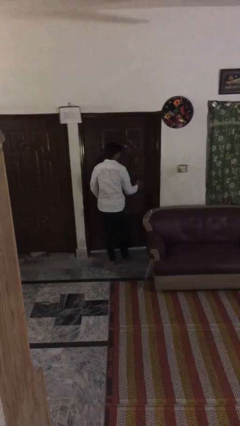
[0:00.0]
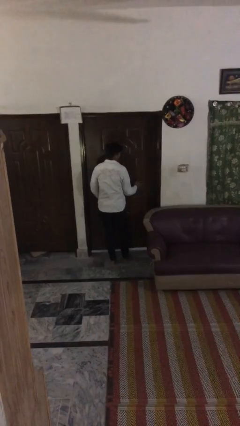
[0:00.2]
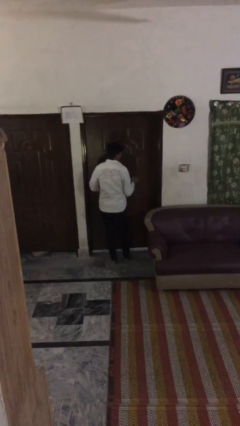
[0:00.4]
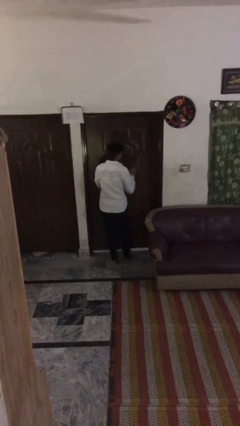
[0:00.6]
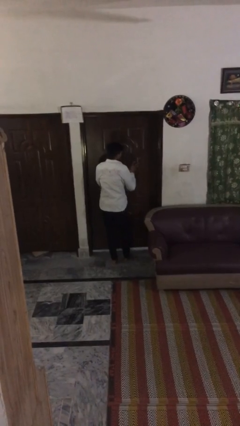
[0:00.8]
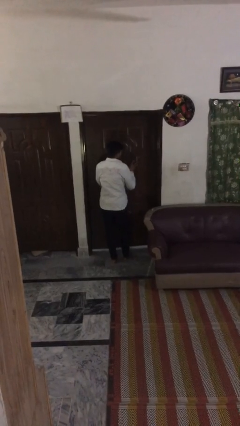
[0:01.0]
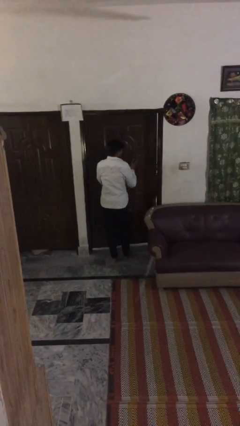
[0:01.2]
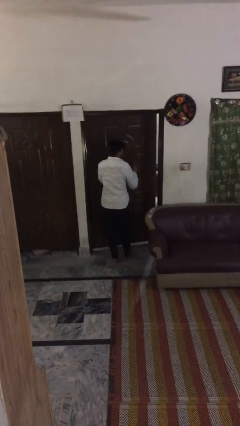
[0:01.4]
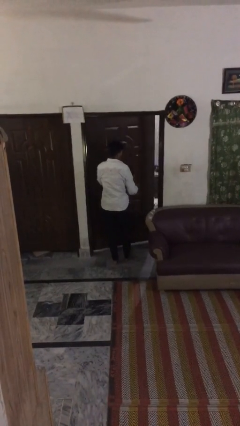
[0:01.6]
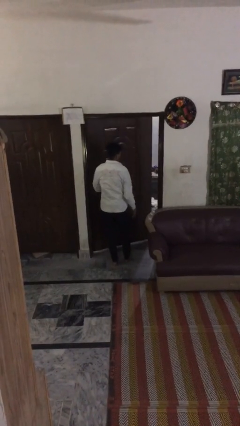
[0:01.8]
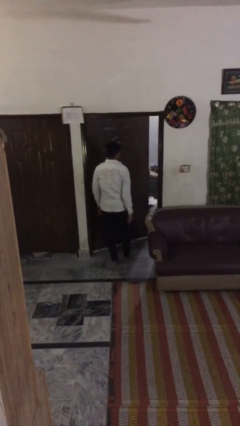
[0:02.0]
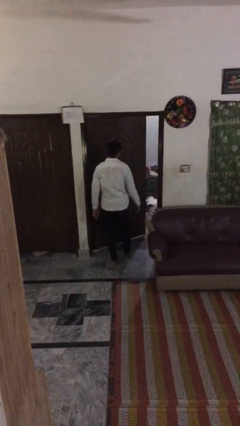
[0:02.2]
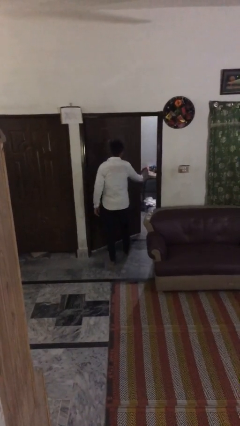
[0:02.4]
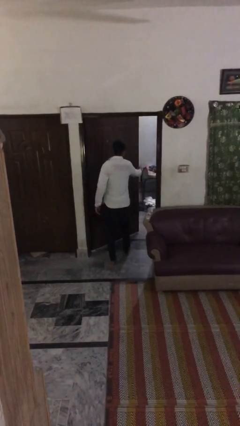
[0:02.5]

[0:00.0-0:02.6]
person opens facility door

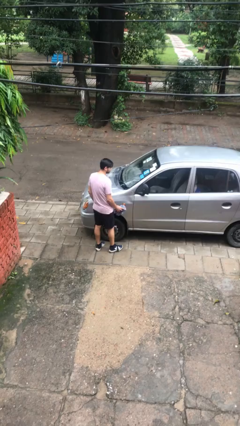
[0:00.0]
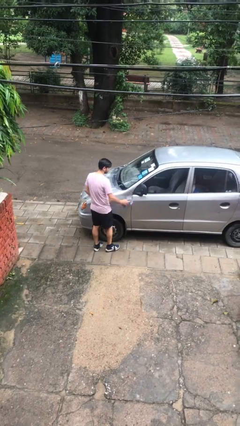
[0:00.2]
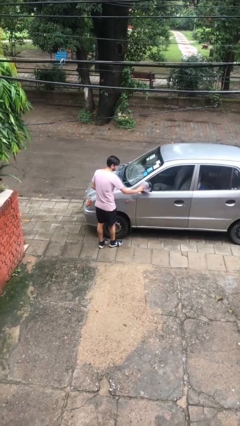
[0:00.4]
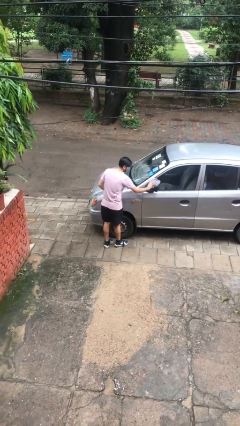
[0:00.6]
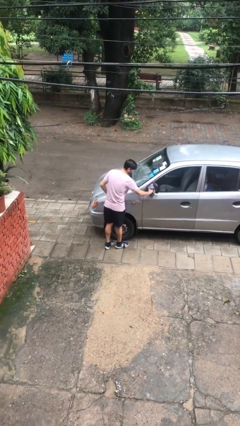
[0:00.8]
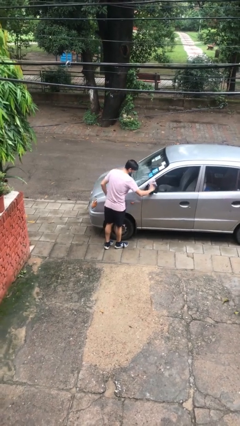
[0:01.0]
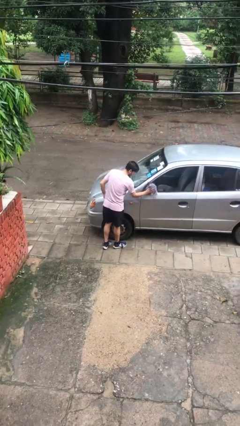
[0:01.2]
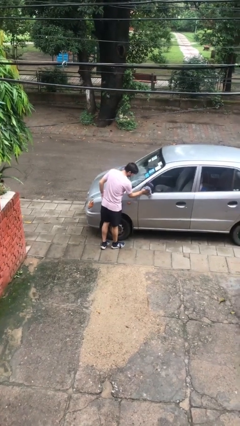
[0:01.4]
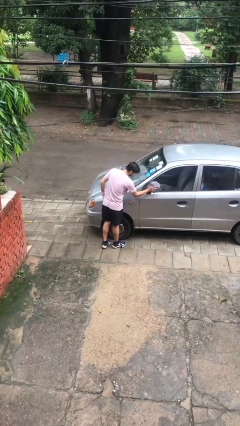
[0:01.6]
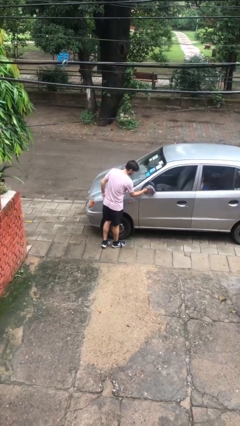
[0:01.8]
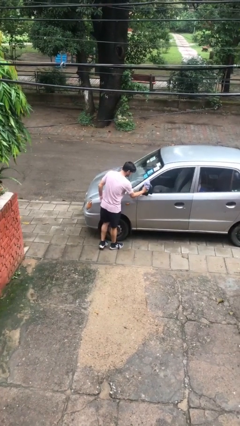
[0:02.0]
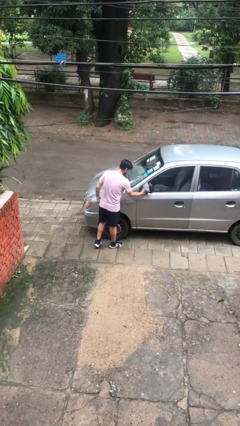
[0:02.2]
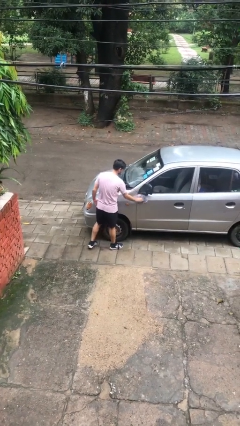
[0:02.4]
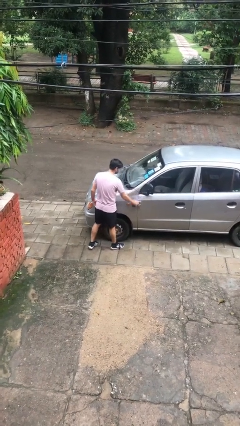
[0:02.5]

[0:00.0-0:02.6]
person polishes car with rag

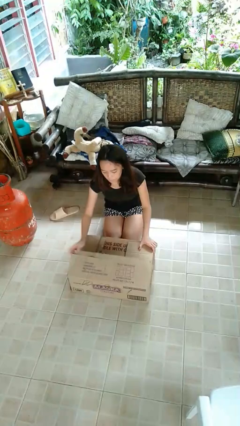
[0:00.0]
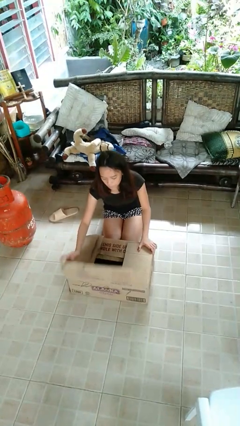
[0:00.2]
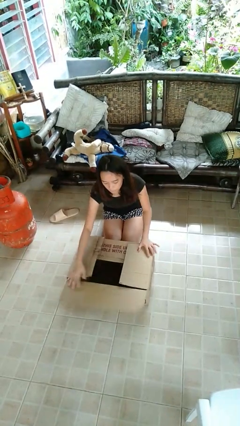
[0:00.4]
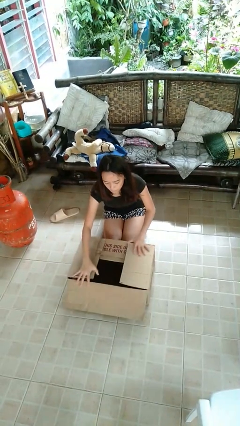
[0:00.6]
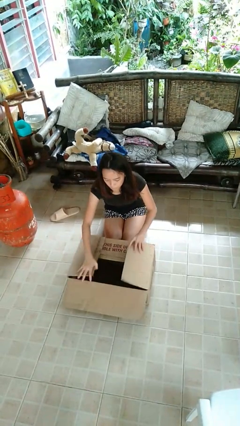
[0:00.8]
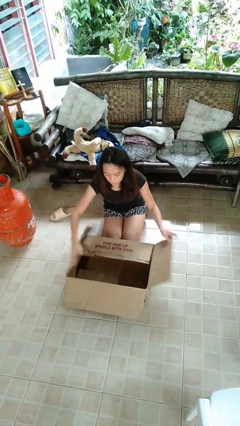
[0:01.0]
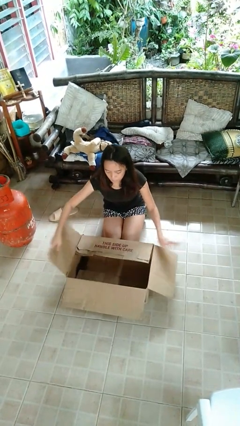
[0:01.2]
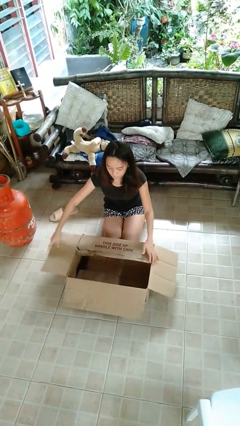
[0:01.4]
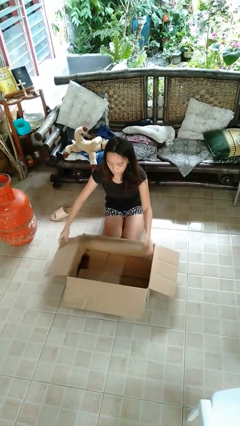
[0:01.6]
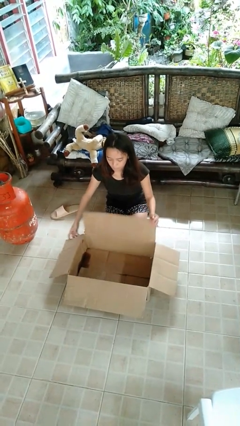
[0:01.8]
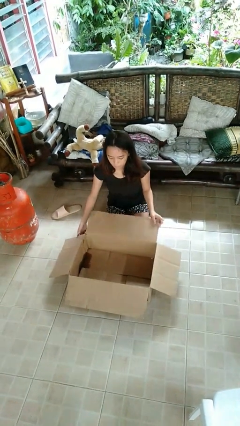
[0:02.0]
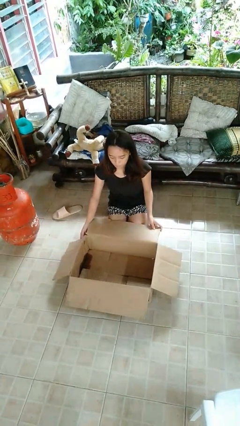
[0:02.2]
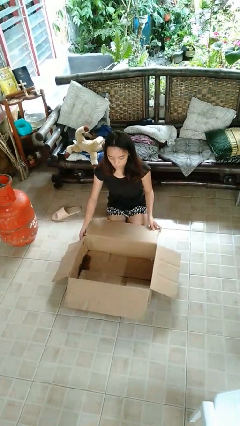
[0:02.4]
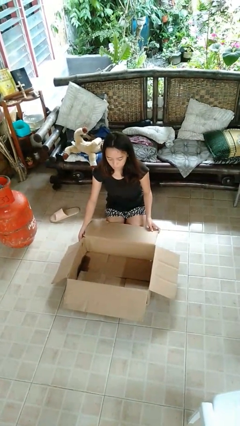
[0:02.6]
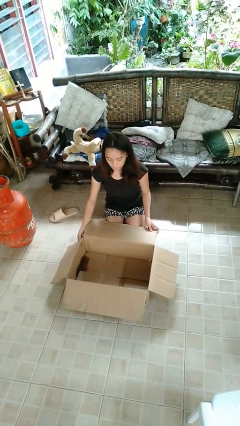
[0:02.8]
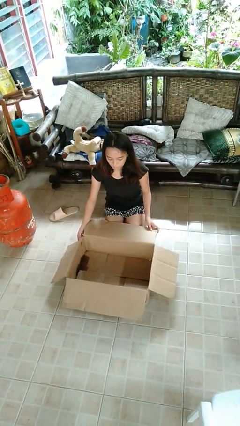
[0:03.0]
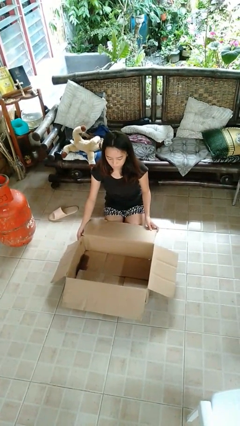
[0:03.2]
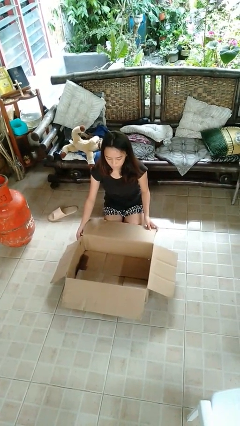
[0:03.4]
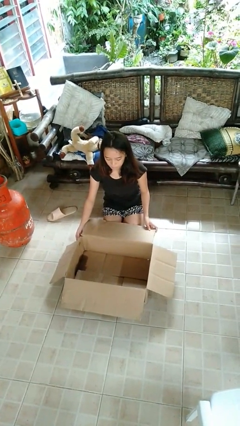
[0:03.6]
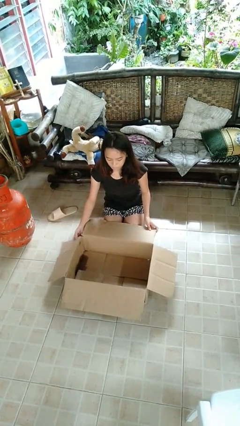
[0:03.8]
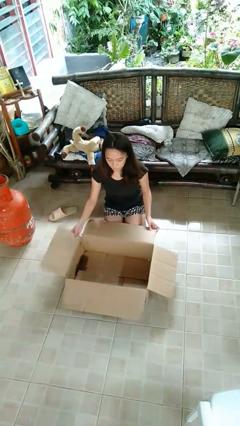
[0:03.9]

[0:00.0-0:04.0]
person opens box

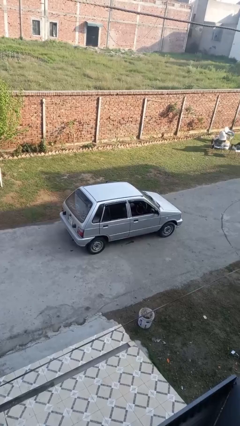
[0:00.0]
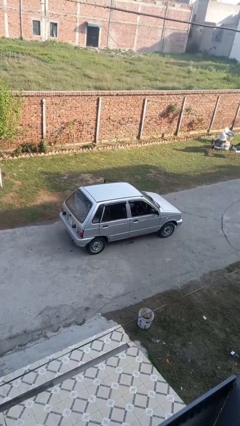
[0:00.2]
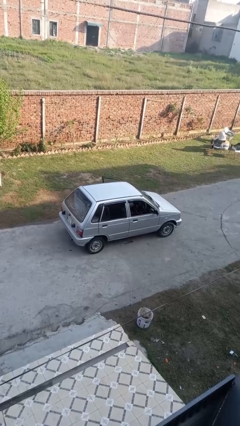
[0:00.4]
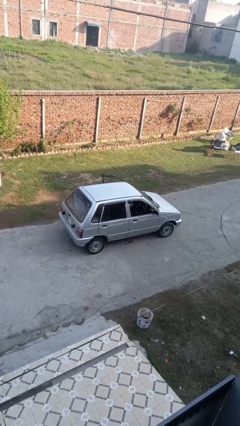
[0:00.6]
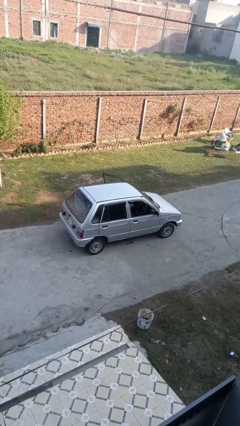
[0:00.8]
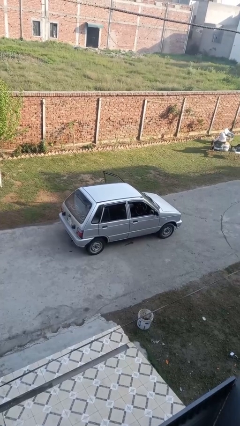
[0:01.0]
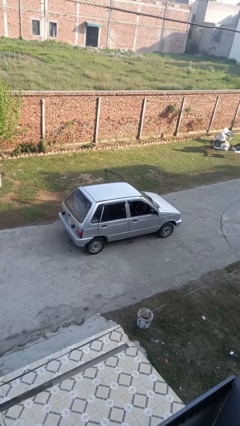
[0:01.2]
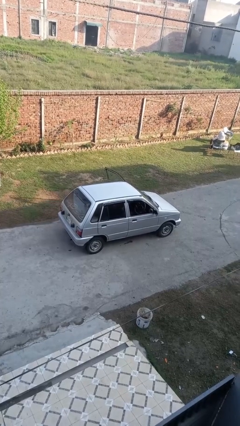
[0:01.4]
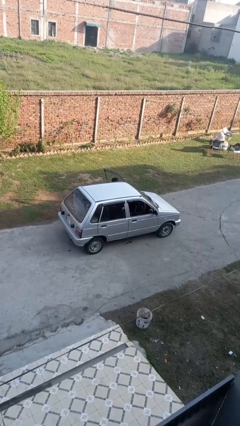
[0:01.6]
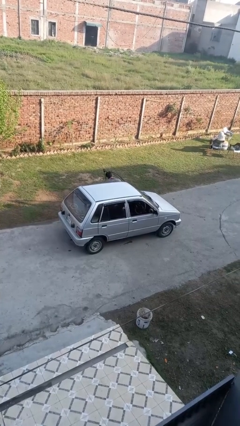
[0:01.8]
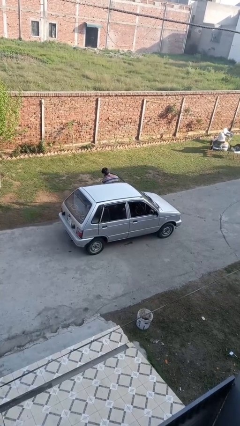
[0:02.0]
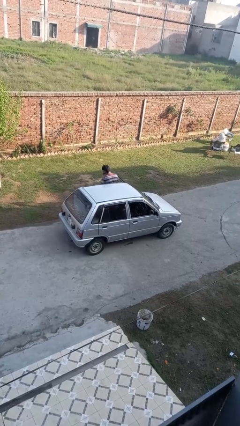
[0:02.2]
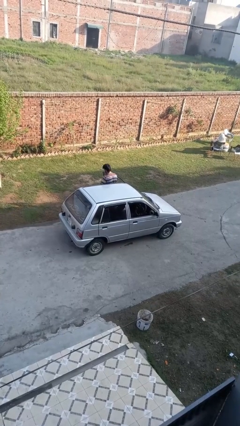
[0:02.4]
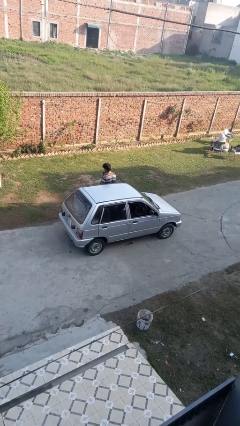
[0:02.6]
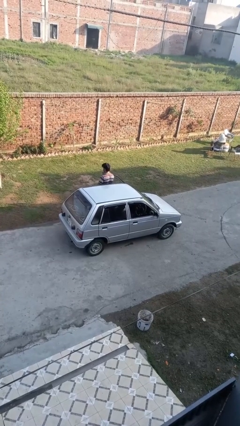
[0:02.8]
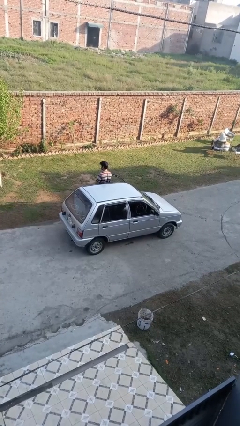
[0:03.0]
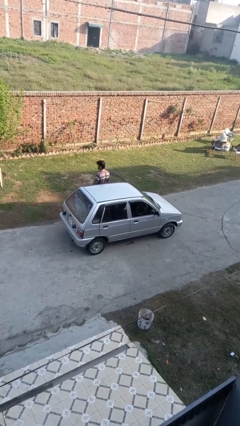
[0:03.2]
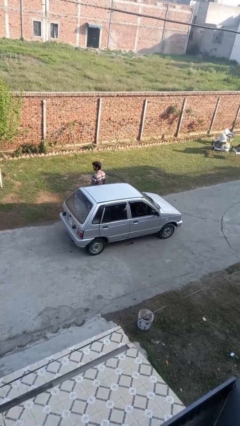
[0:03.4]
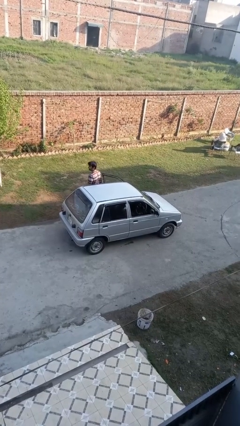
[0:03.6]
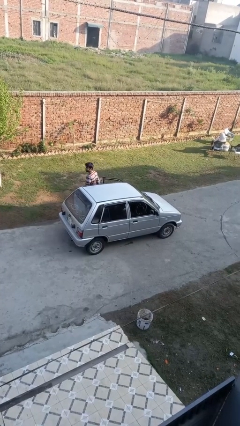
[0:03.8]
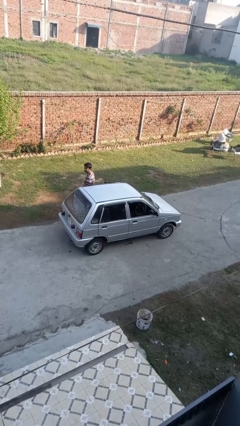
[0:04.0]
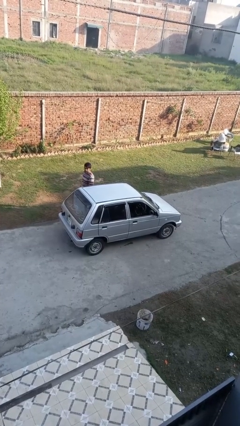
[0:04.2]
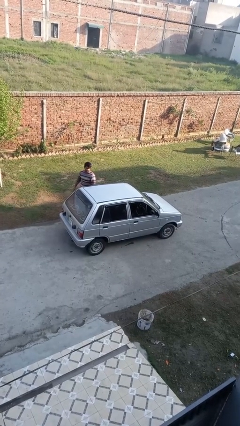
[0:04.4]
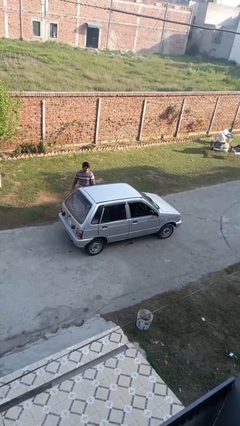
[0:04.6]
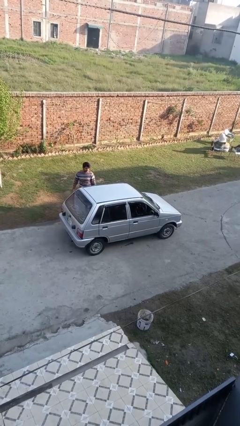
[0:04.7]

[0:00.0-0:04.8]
car drops off person

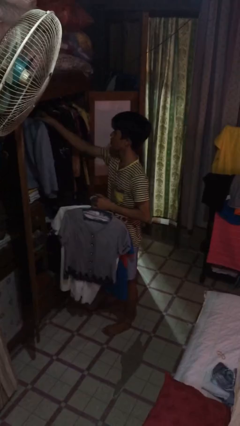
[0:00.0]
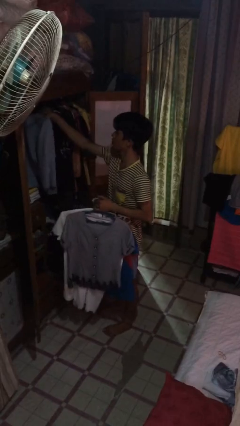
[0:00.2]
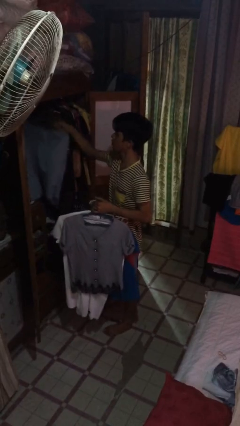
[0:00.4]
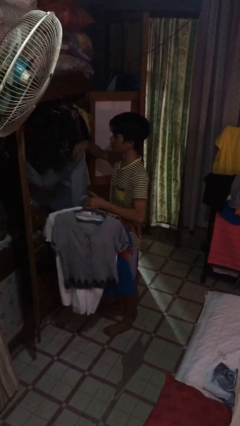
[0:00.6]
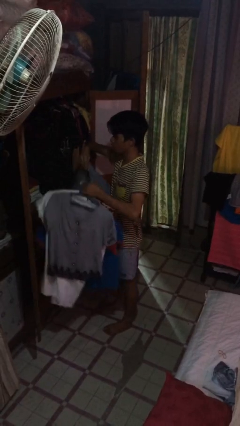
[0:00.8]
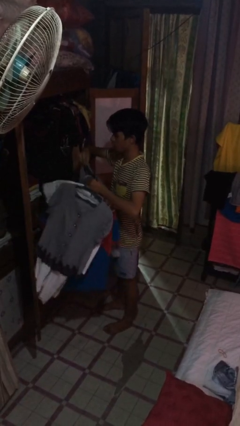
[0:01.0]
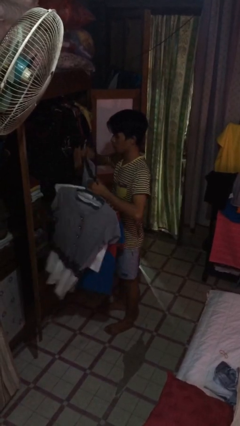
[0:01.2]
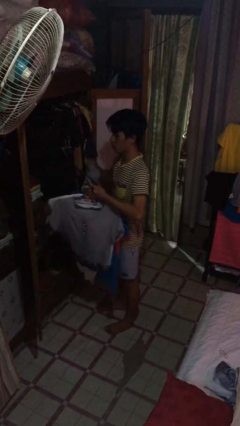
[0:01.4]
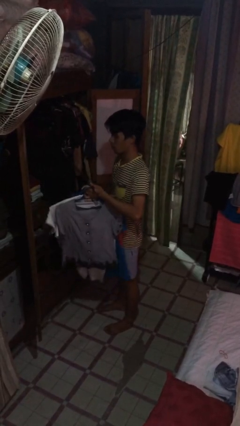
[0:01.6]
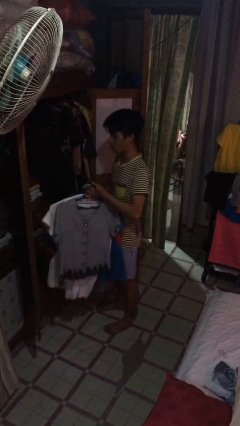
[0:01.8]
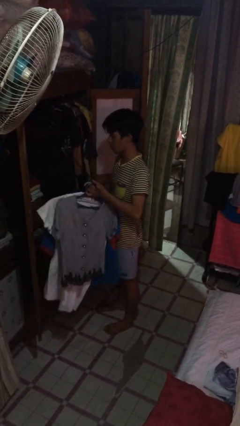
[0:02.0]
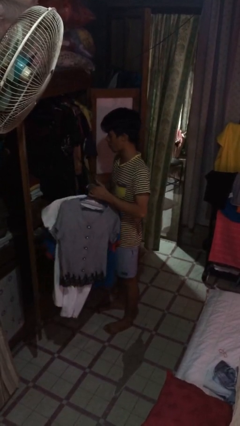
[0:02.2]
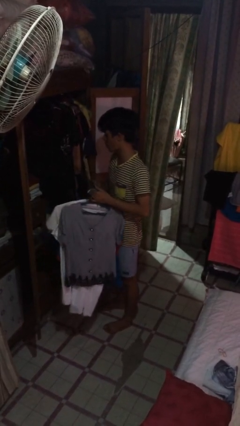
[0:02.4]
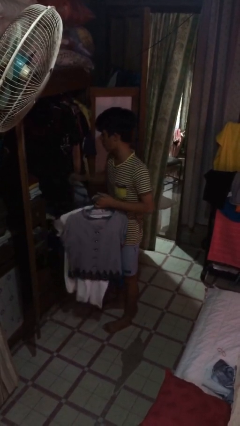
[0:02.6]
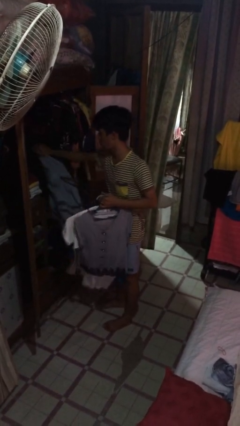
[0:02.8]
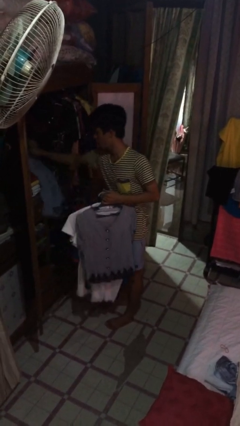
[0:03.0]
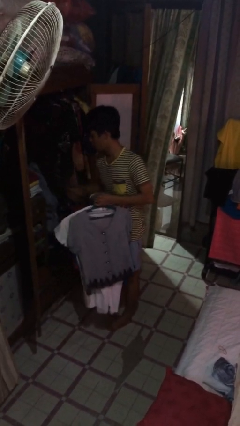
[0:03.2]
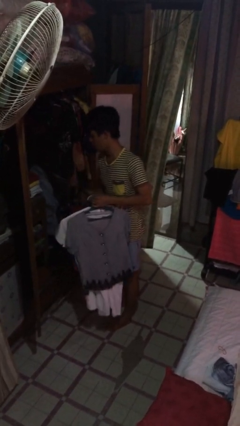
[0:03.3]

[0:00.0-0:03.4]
person takes clothes from closet
